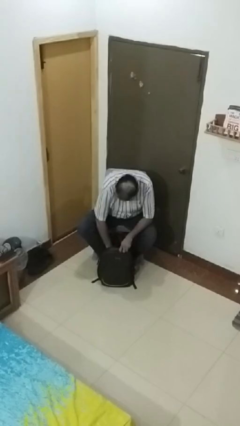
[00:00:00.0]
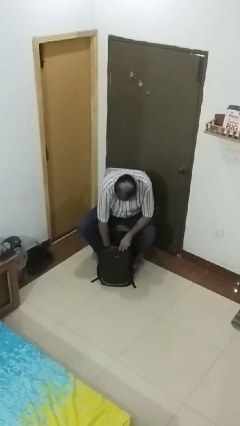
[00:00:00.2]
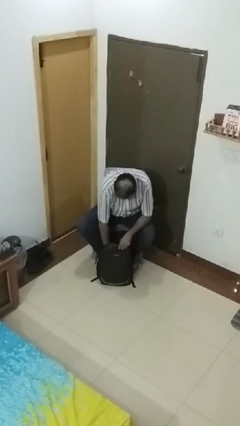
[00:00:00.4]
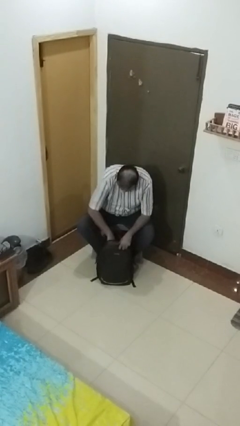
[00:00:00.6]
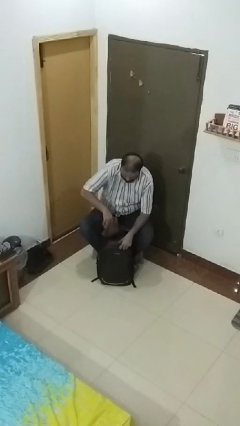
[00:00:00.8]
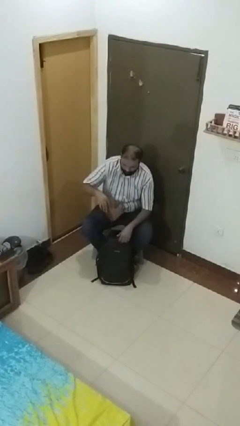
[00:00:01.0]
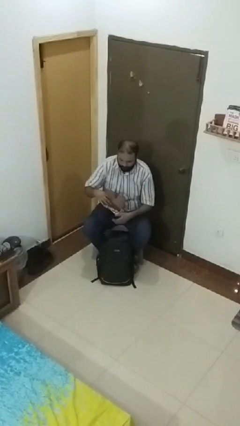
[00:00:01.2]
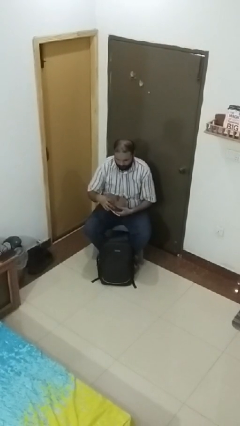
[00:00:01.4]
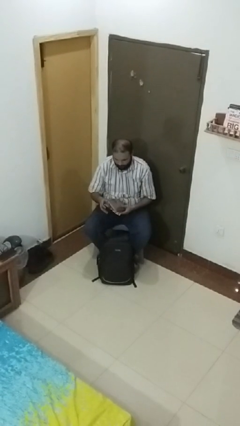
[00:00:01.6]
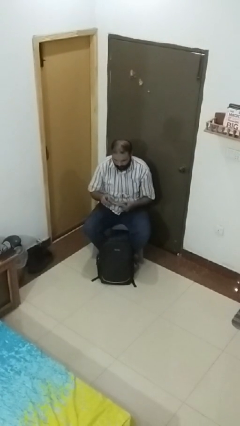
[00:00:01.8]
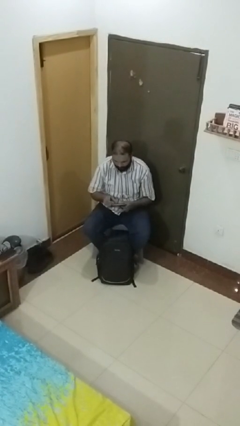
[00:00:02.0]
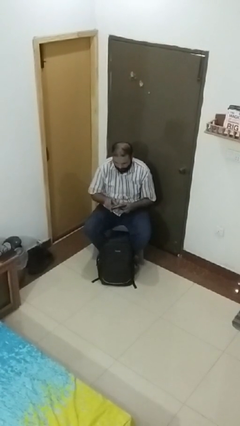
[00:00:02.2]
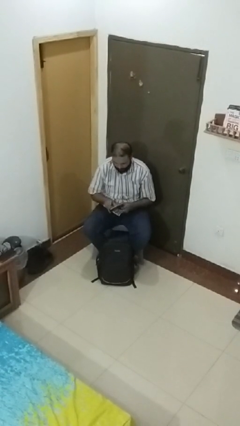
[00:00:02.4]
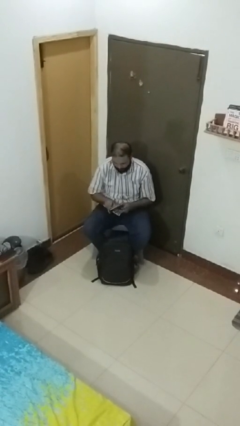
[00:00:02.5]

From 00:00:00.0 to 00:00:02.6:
person takes object from backpack

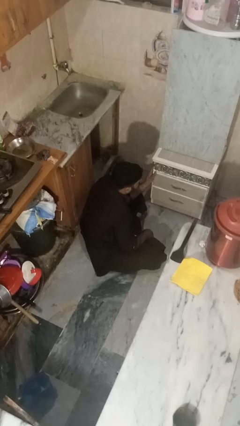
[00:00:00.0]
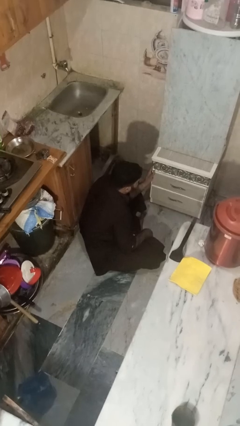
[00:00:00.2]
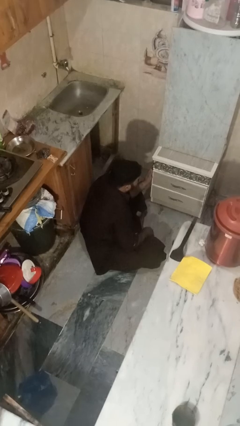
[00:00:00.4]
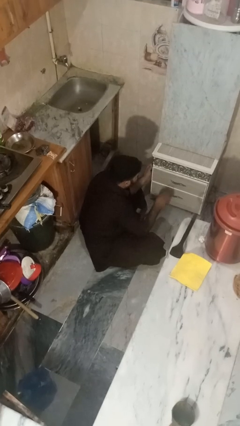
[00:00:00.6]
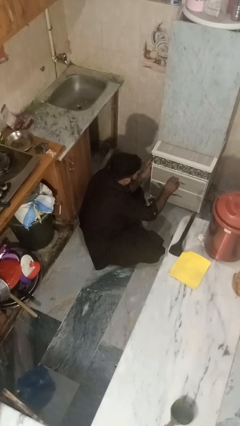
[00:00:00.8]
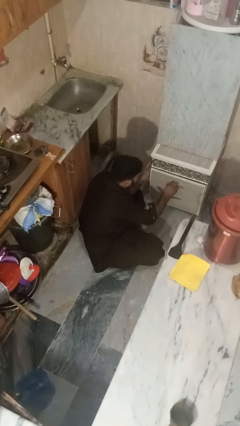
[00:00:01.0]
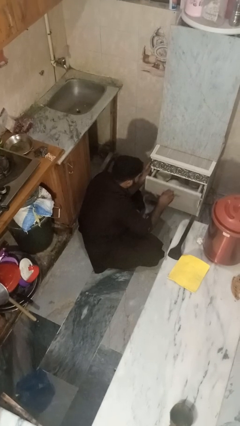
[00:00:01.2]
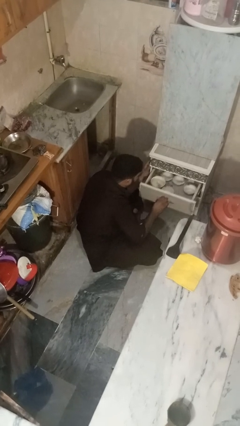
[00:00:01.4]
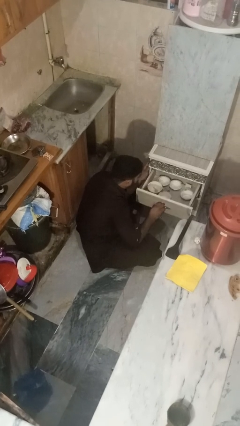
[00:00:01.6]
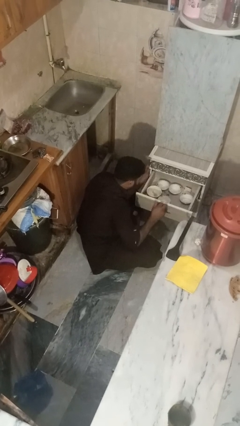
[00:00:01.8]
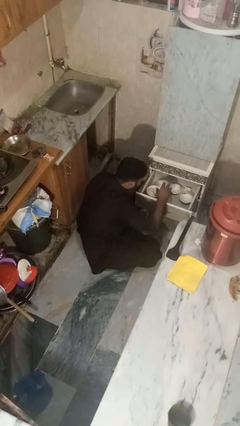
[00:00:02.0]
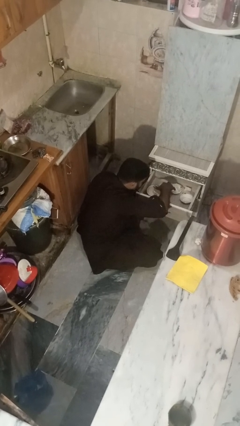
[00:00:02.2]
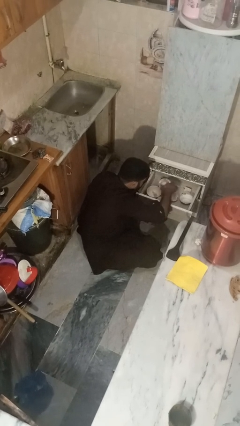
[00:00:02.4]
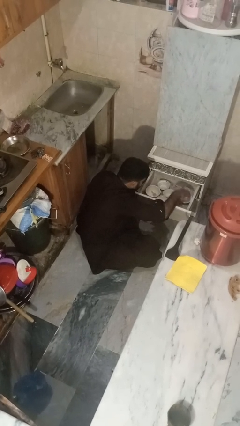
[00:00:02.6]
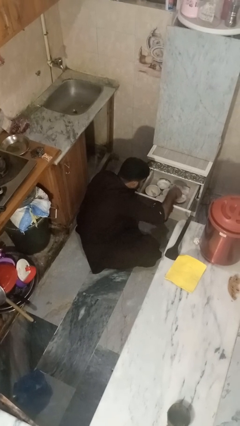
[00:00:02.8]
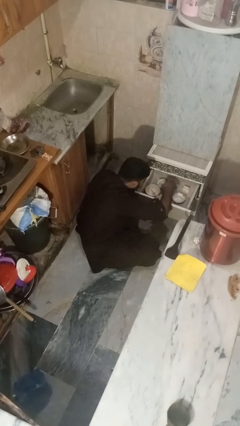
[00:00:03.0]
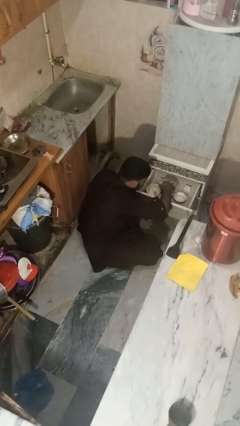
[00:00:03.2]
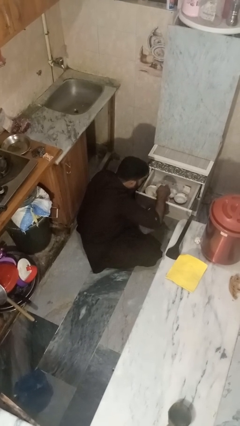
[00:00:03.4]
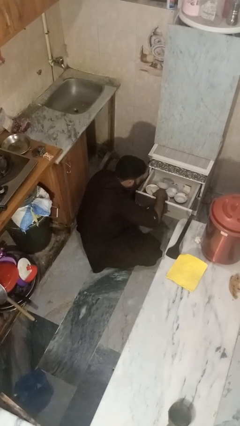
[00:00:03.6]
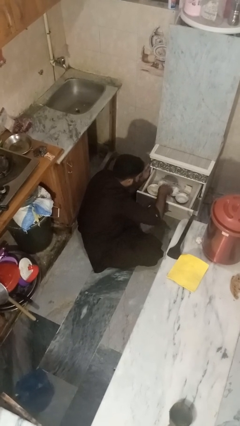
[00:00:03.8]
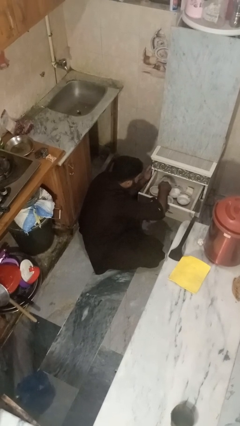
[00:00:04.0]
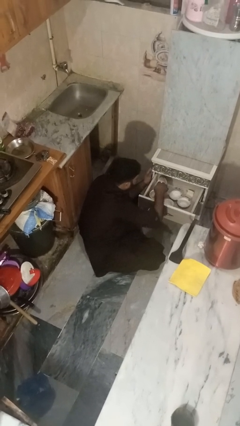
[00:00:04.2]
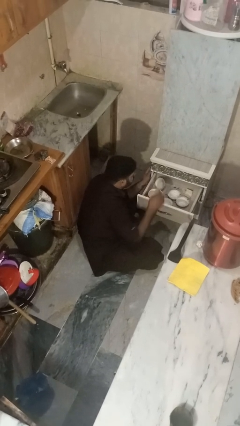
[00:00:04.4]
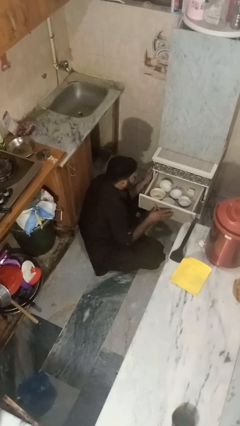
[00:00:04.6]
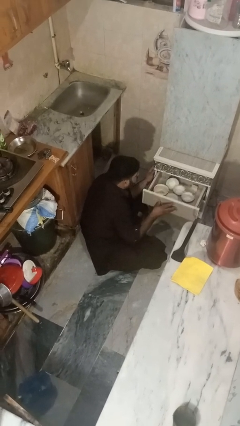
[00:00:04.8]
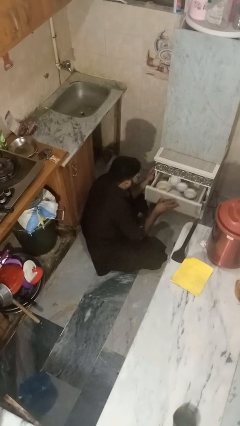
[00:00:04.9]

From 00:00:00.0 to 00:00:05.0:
person searches in kitchen drawer

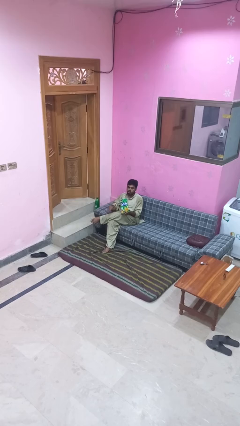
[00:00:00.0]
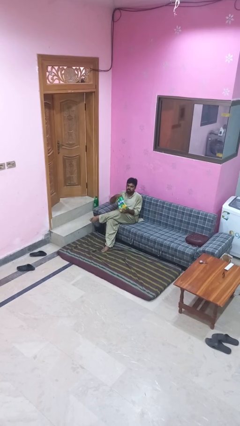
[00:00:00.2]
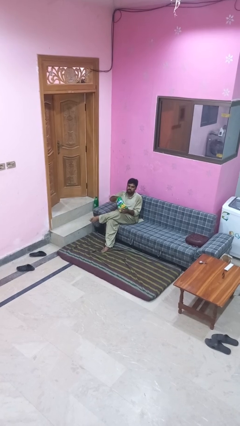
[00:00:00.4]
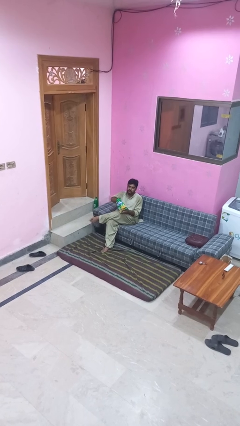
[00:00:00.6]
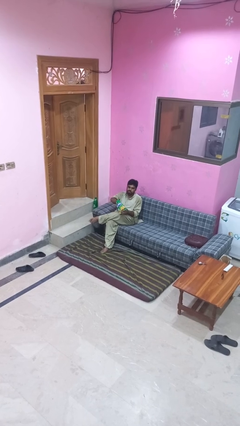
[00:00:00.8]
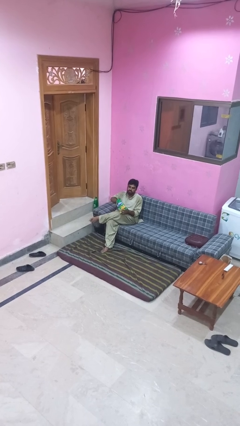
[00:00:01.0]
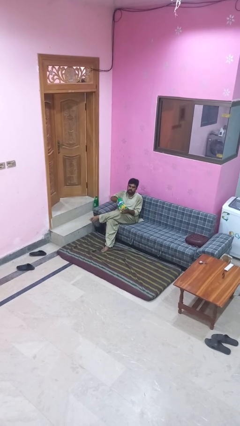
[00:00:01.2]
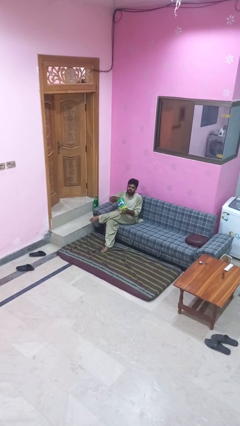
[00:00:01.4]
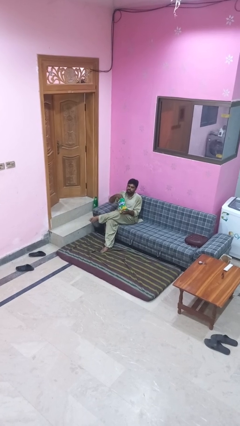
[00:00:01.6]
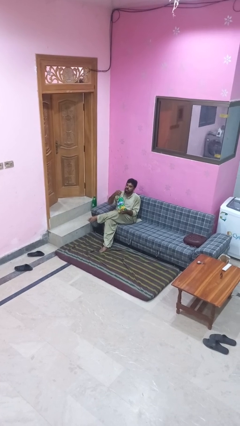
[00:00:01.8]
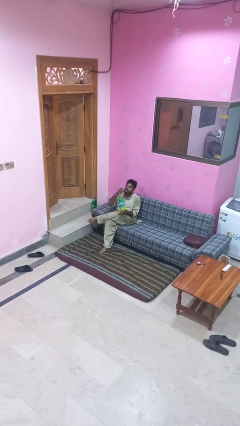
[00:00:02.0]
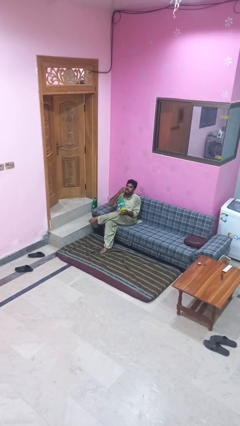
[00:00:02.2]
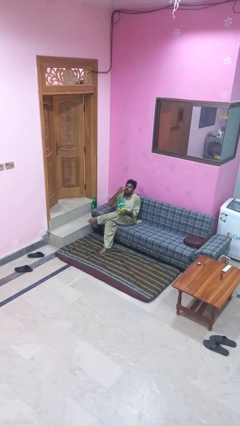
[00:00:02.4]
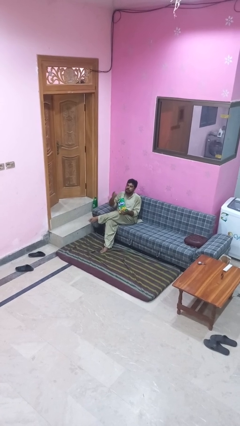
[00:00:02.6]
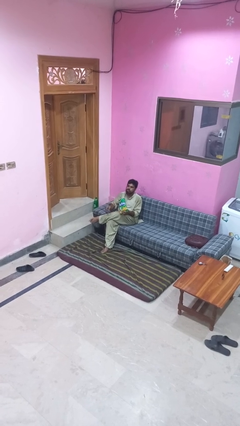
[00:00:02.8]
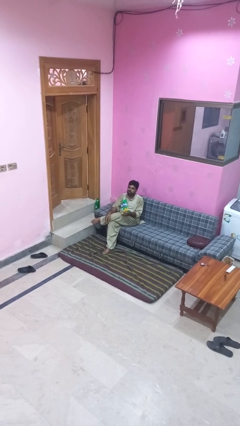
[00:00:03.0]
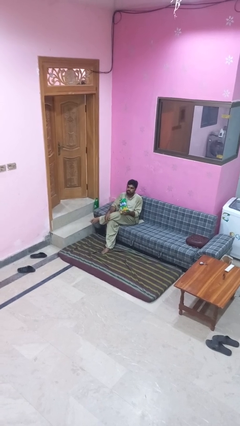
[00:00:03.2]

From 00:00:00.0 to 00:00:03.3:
person eats snack from bag

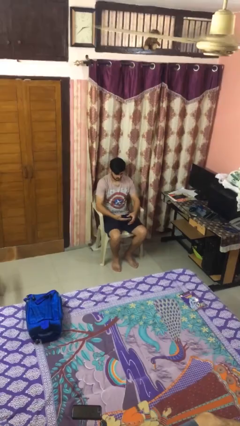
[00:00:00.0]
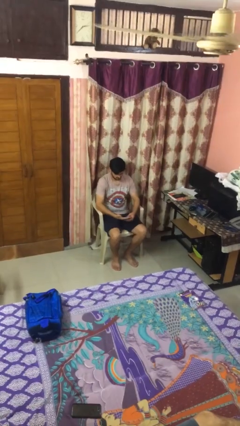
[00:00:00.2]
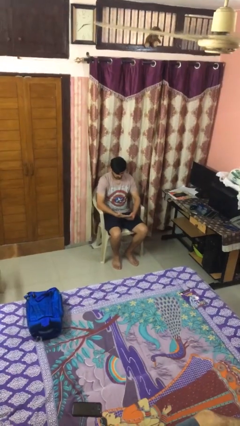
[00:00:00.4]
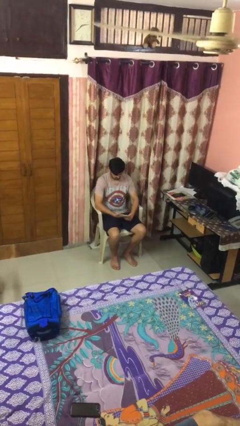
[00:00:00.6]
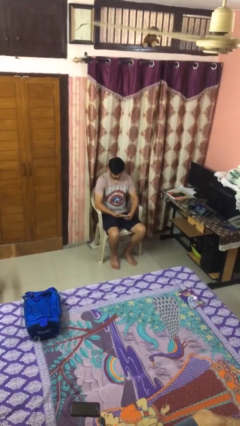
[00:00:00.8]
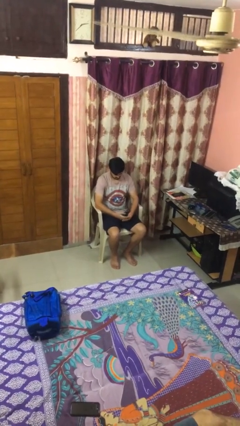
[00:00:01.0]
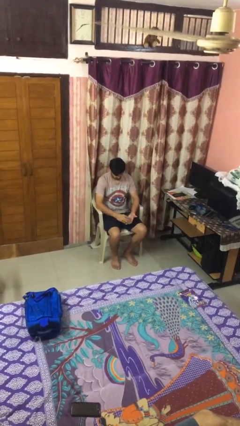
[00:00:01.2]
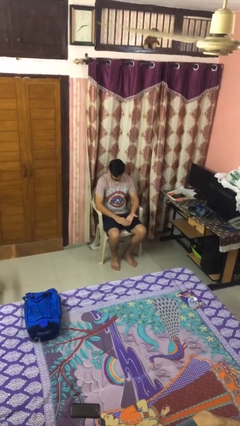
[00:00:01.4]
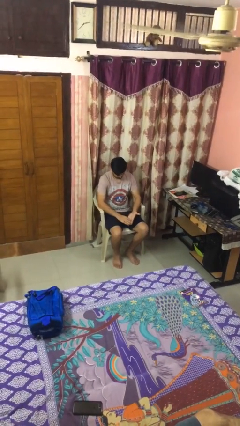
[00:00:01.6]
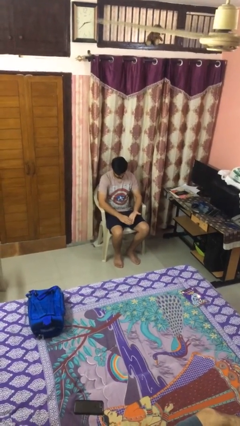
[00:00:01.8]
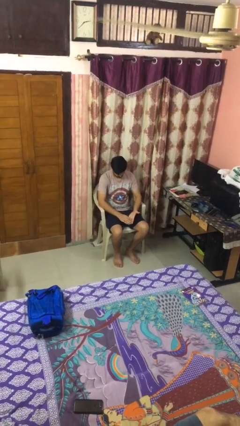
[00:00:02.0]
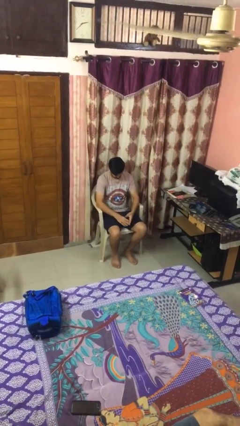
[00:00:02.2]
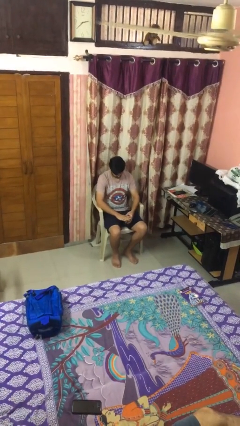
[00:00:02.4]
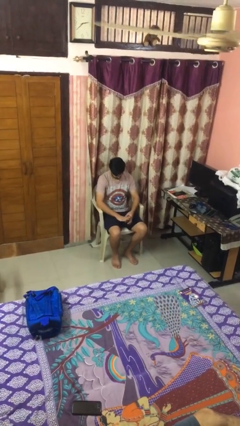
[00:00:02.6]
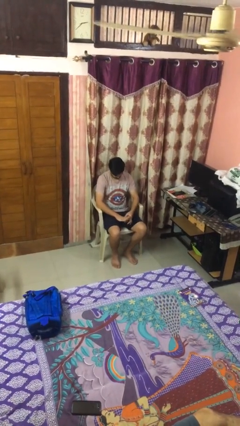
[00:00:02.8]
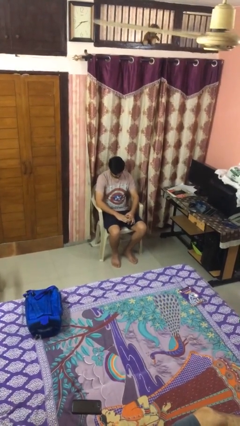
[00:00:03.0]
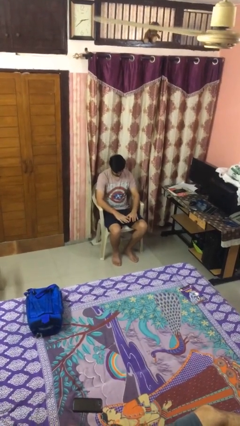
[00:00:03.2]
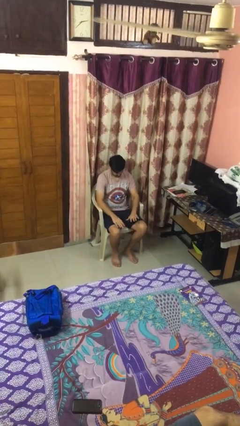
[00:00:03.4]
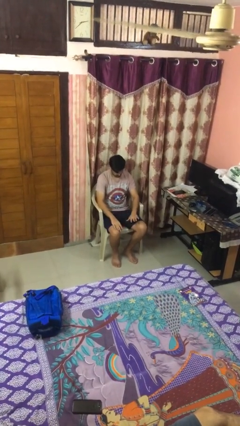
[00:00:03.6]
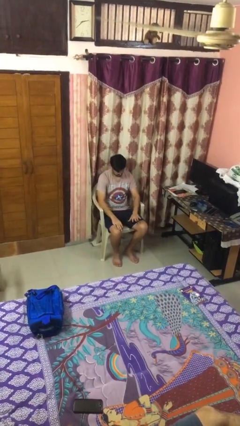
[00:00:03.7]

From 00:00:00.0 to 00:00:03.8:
person looks at hands in lap

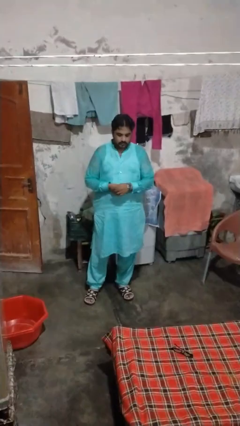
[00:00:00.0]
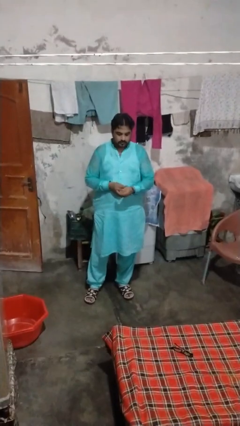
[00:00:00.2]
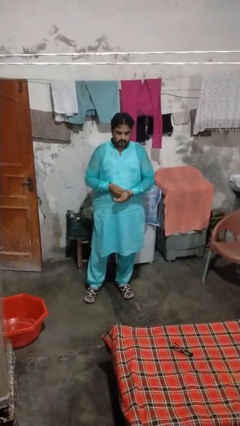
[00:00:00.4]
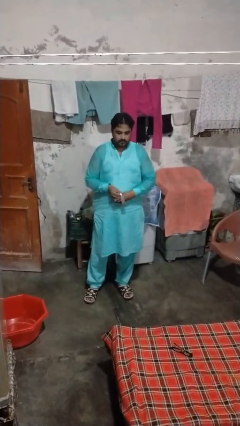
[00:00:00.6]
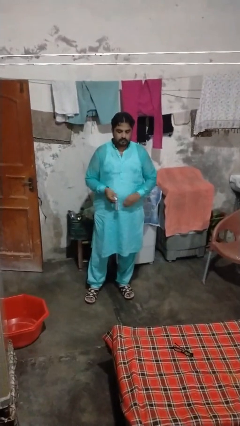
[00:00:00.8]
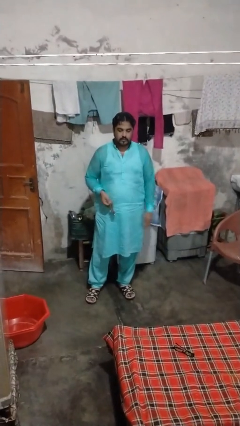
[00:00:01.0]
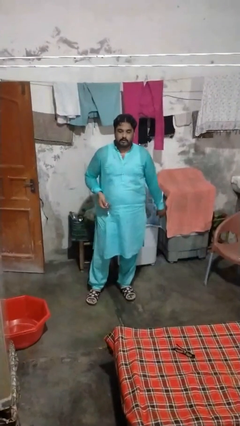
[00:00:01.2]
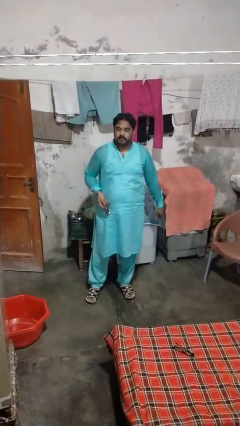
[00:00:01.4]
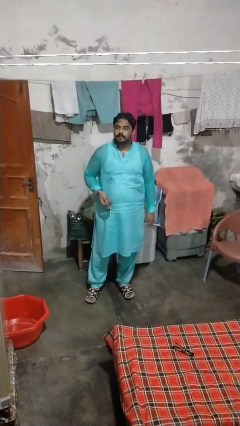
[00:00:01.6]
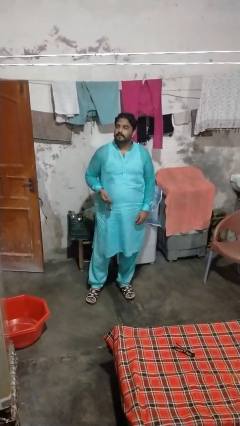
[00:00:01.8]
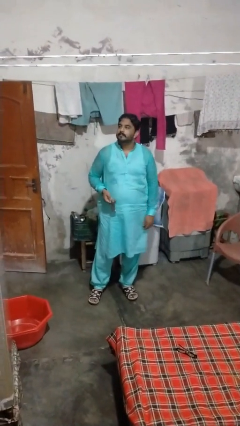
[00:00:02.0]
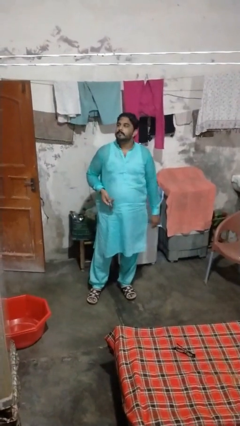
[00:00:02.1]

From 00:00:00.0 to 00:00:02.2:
person takes off wristwatch

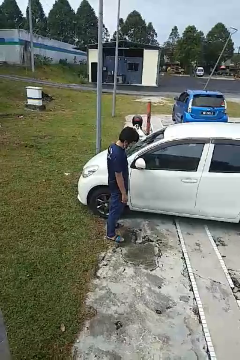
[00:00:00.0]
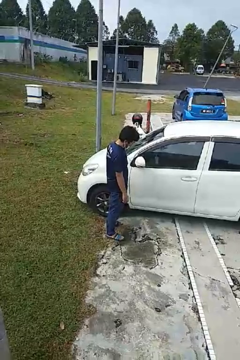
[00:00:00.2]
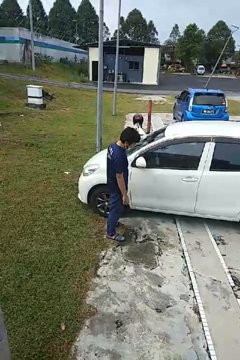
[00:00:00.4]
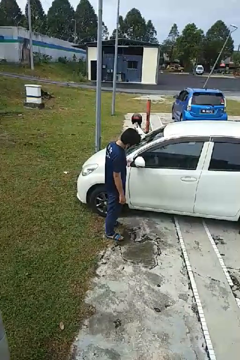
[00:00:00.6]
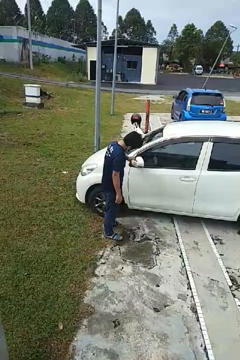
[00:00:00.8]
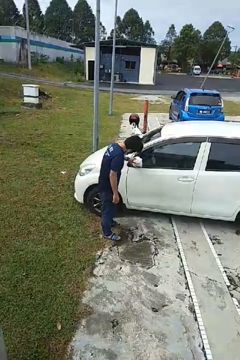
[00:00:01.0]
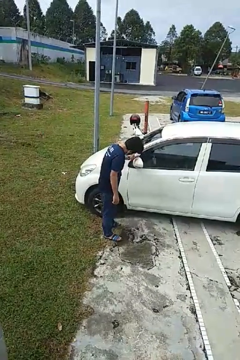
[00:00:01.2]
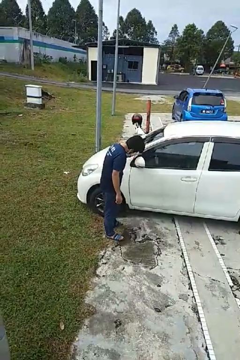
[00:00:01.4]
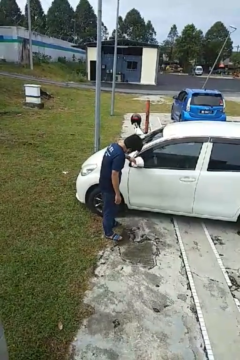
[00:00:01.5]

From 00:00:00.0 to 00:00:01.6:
person polishes car with rag
